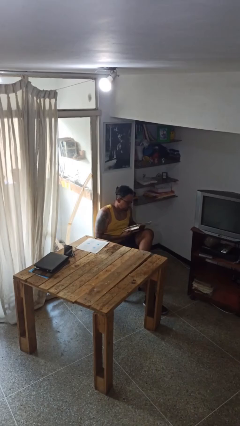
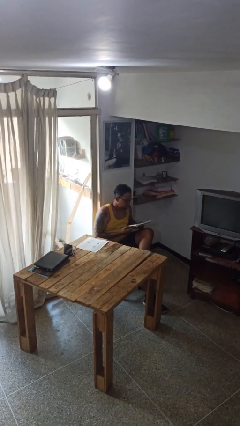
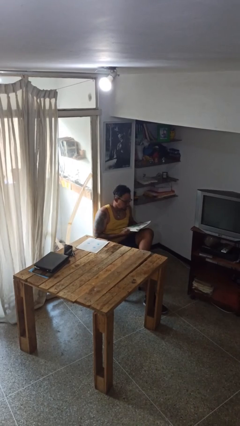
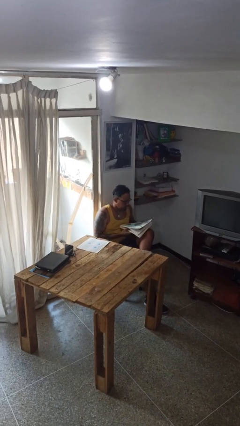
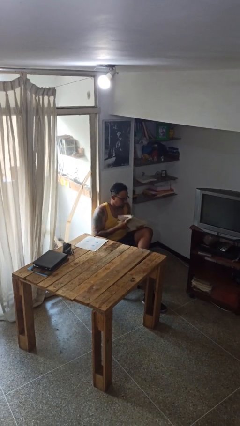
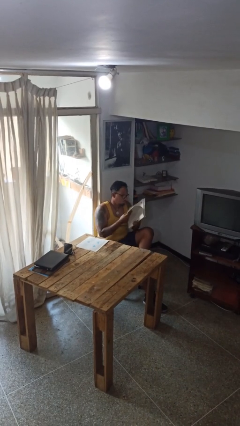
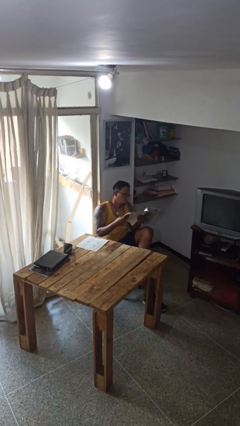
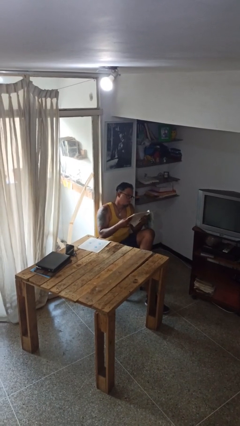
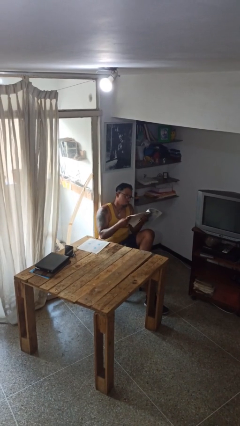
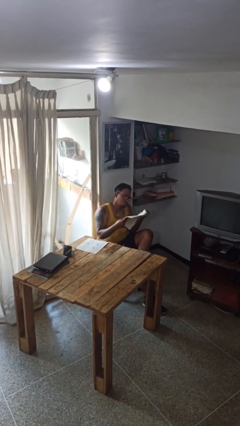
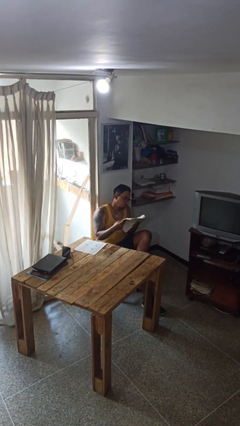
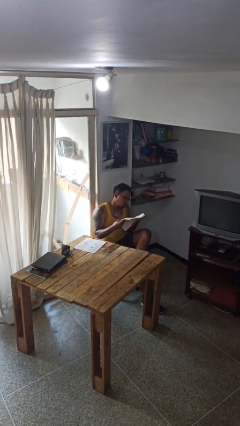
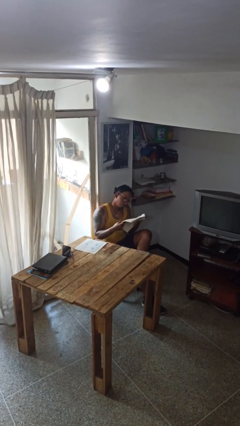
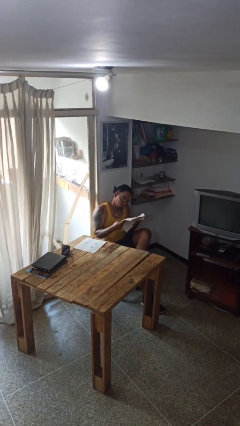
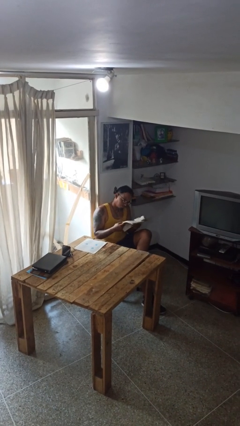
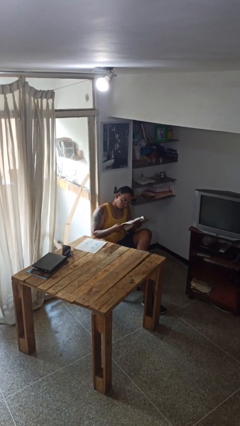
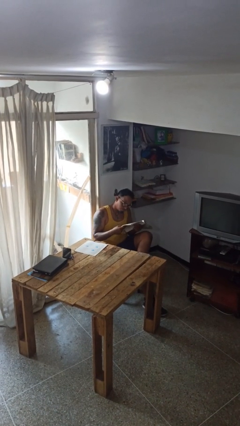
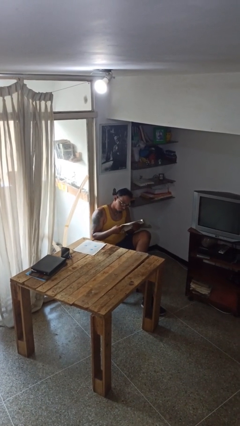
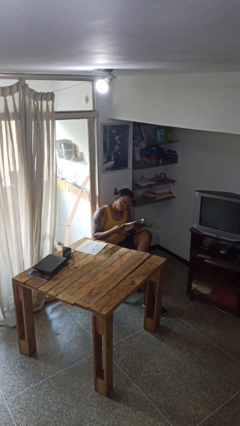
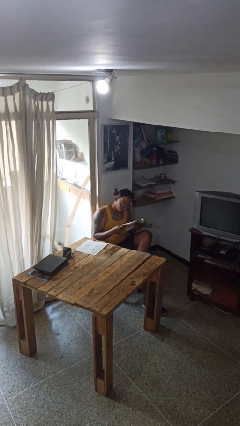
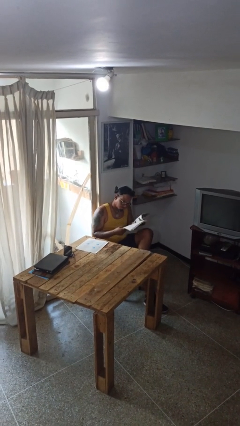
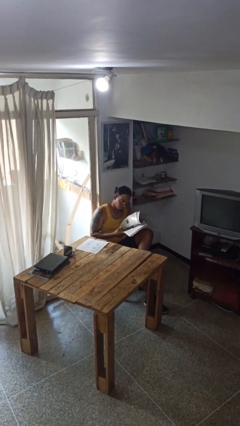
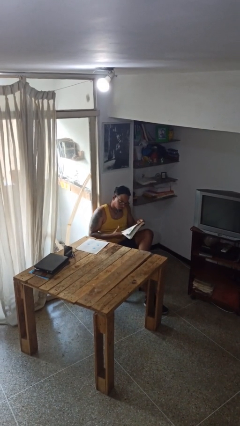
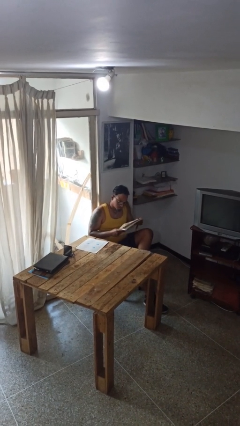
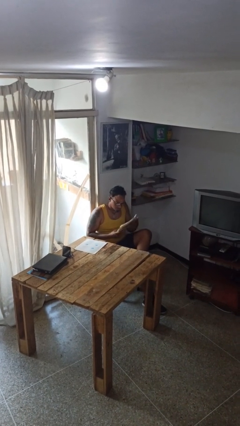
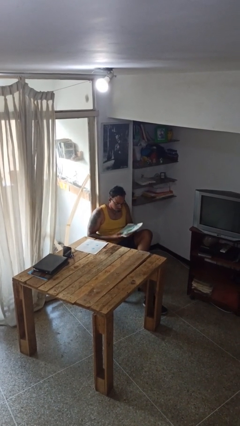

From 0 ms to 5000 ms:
person reads document

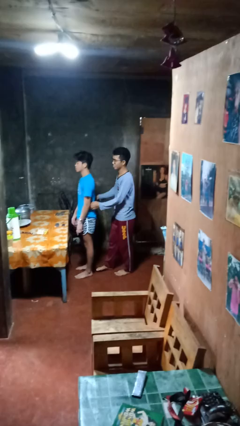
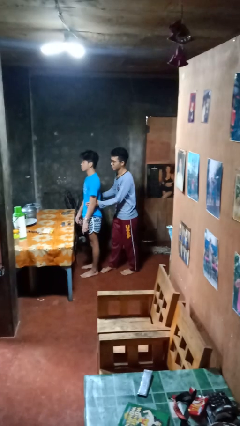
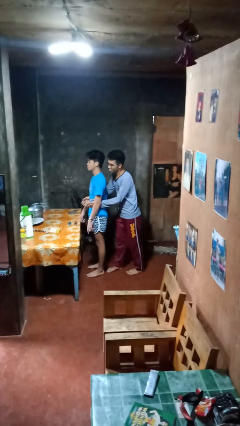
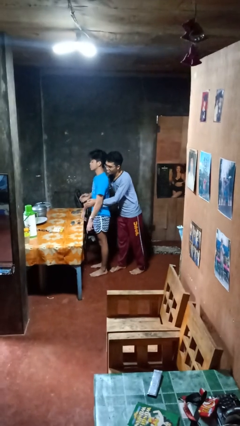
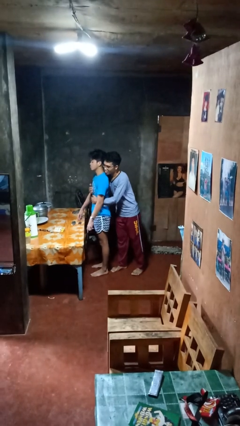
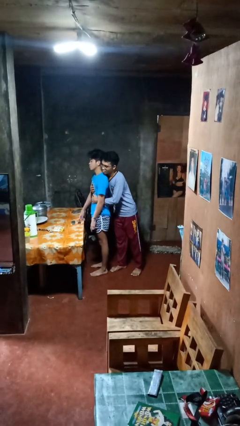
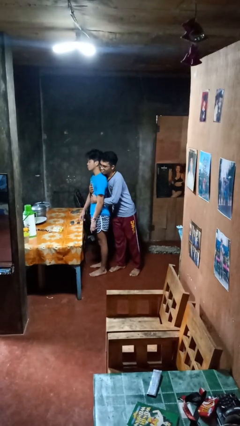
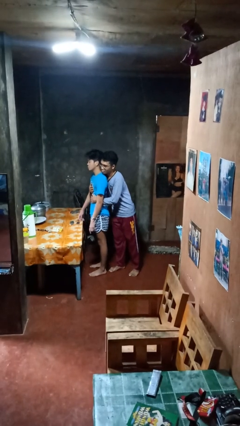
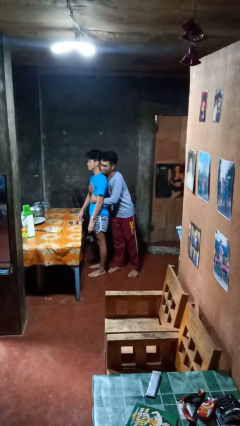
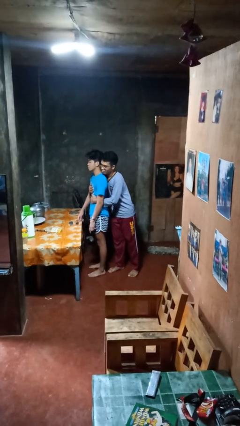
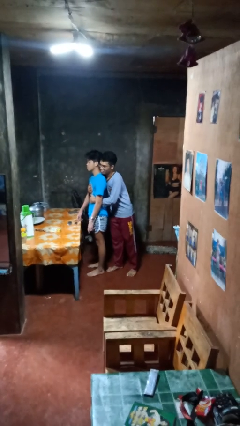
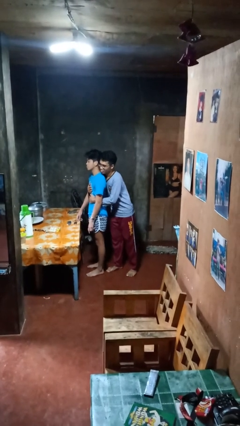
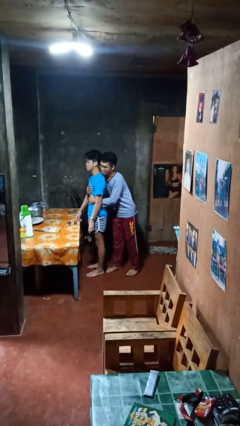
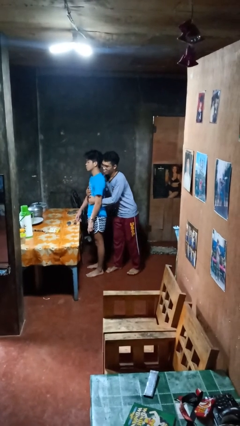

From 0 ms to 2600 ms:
person hugs person from behind

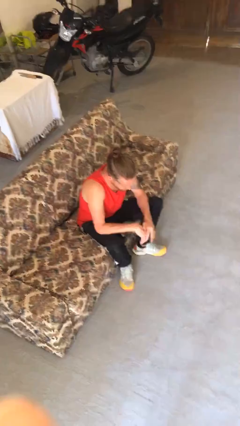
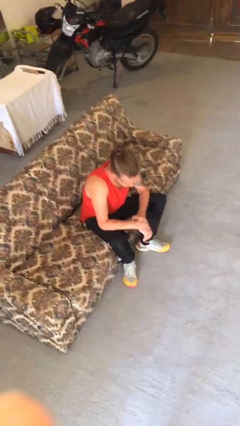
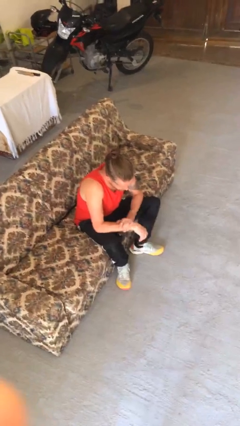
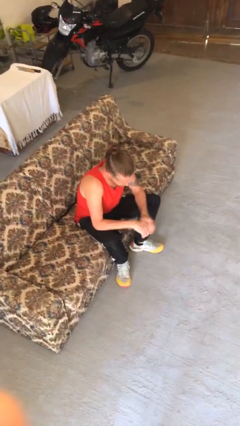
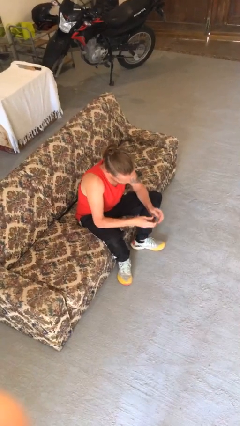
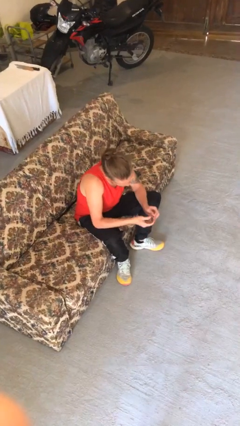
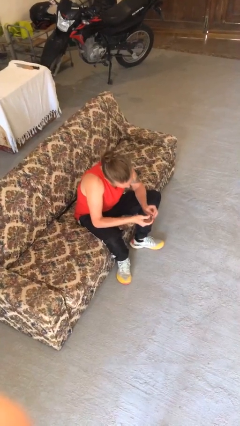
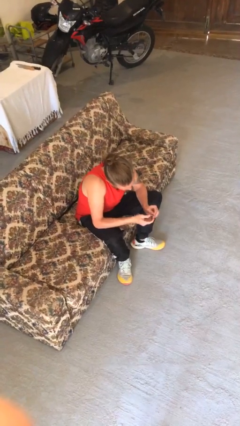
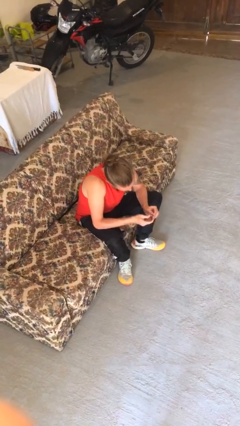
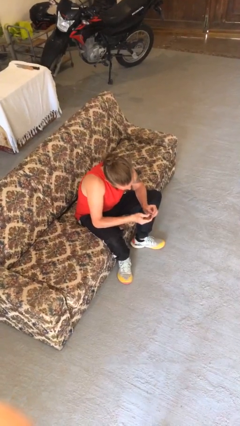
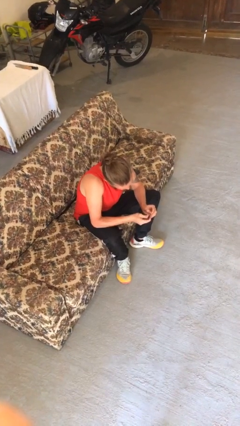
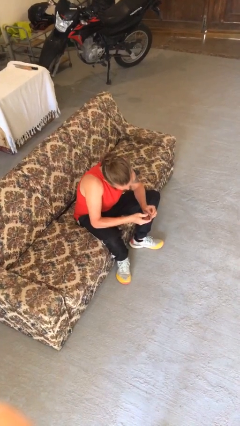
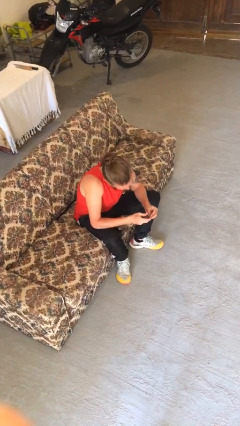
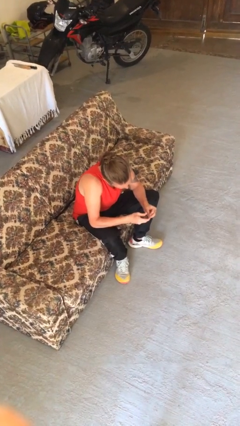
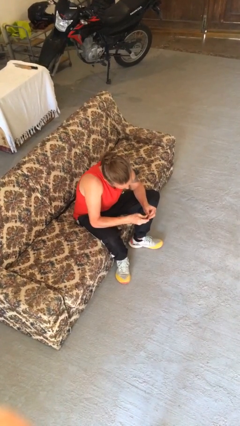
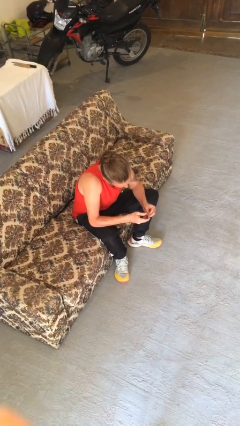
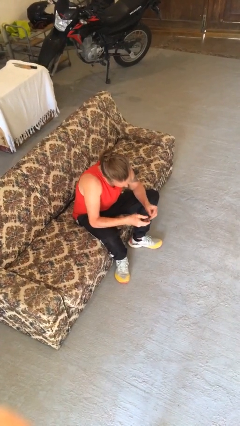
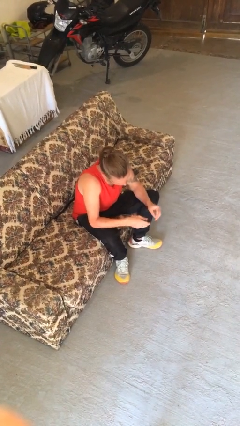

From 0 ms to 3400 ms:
person clips fingernails

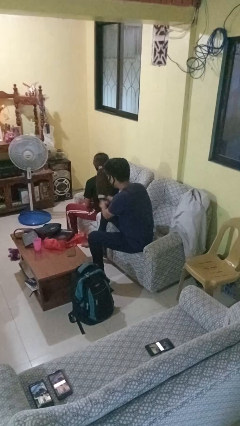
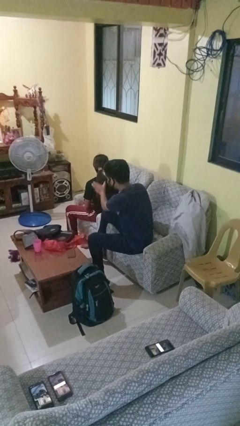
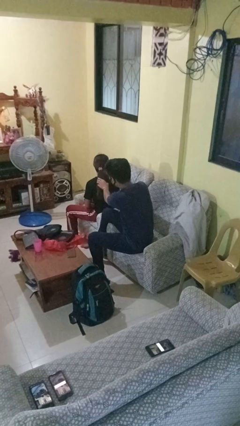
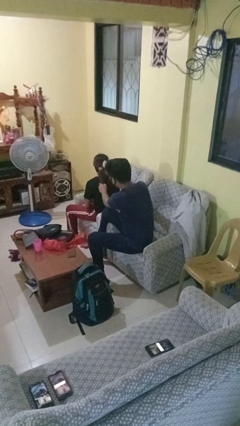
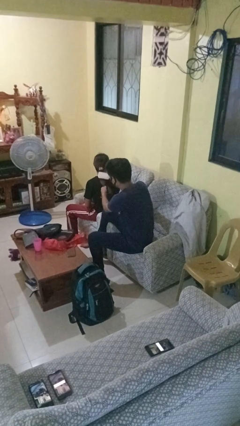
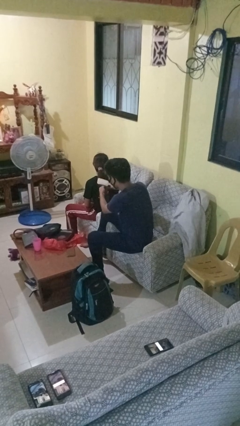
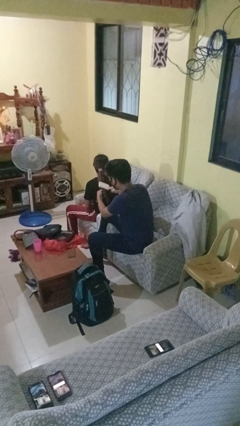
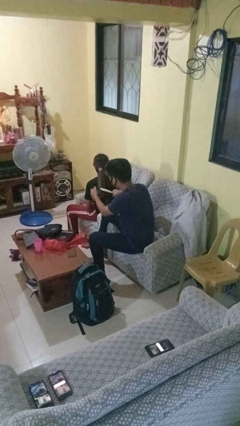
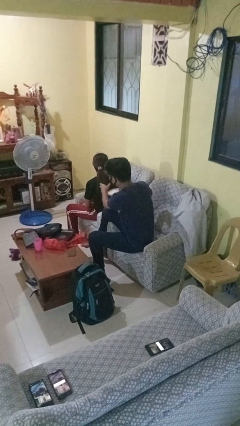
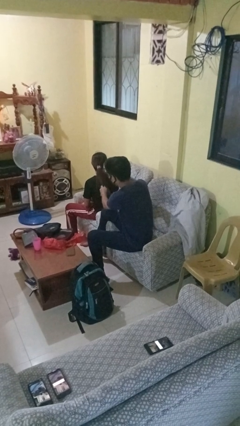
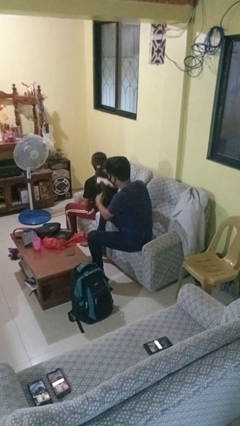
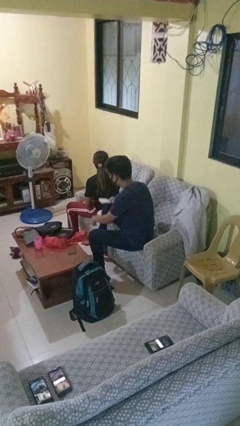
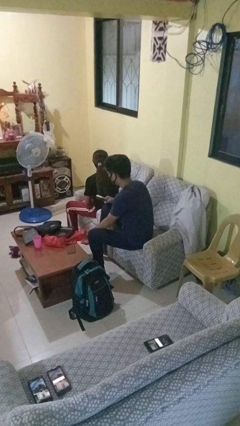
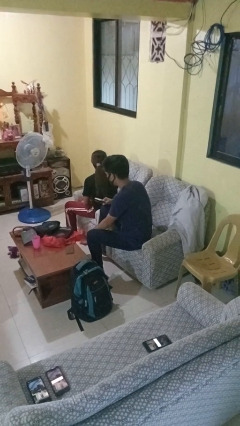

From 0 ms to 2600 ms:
person brushes hair of person

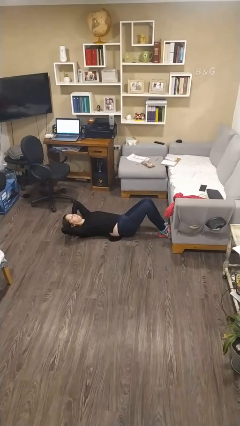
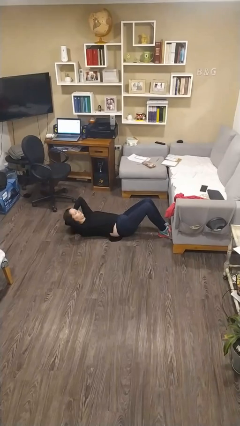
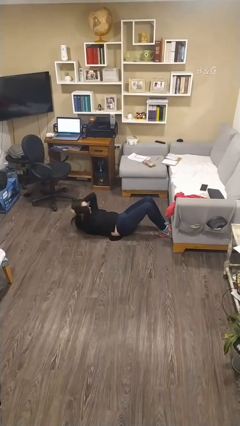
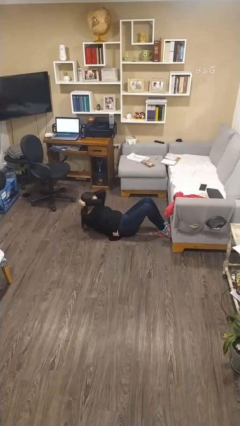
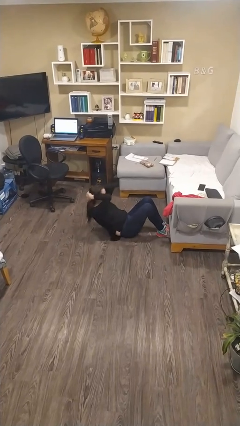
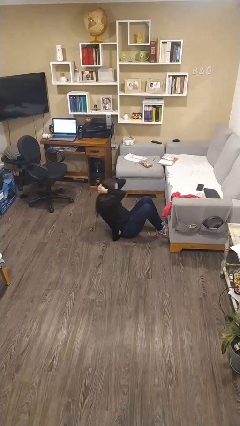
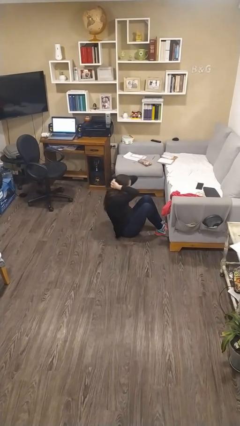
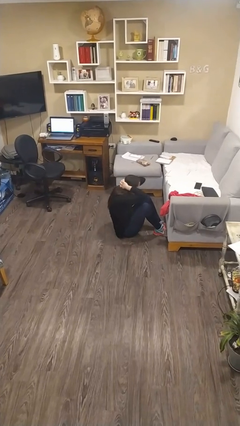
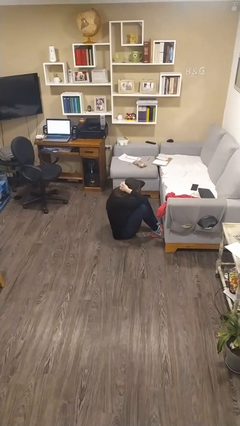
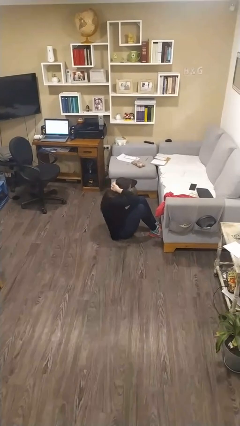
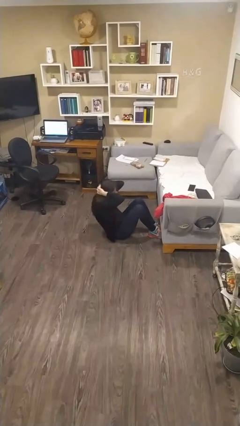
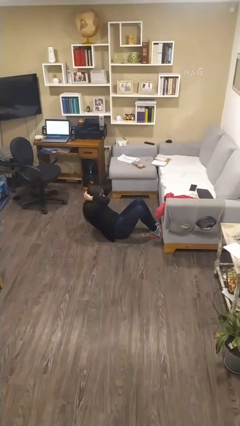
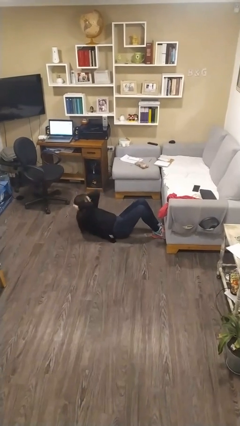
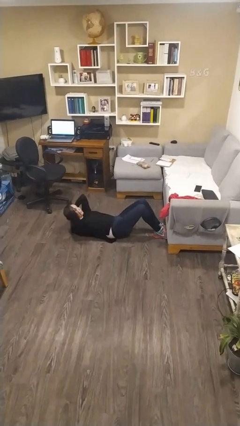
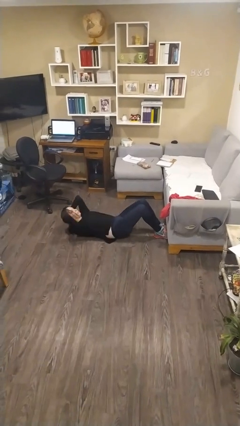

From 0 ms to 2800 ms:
person exercises with situp

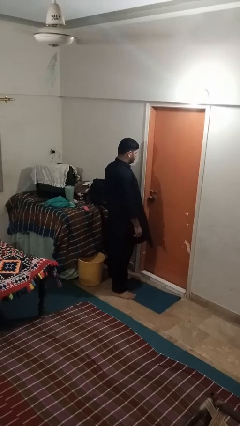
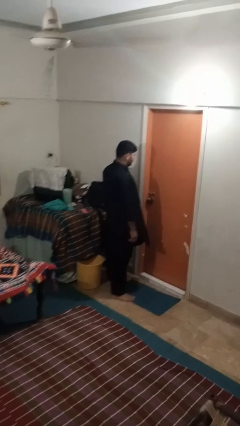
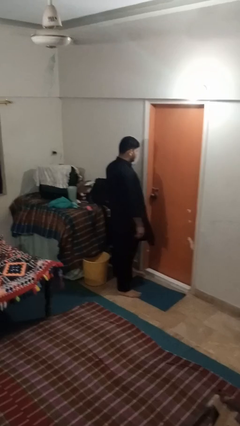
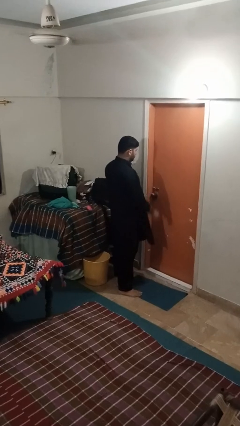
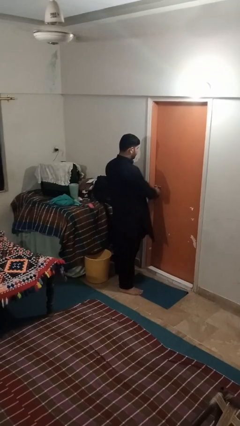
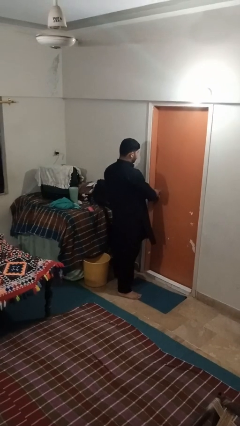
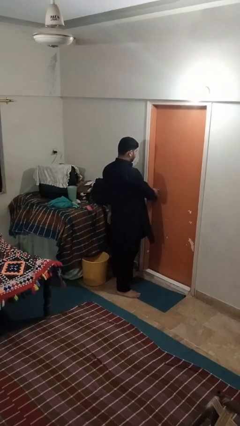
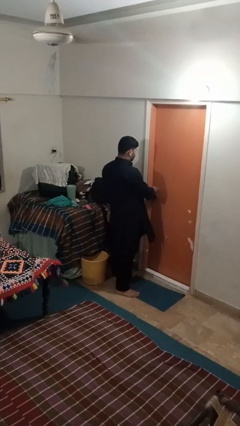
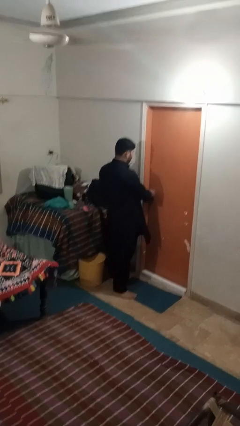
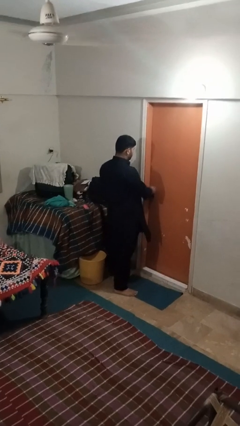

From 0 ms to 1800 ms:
person unlocks door with keys
